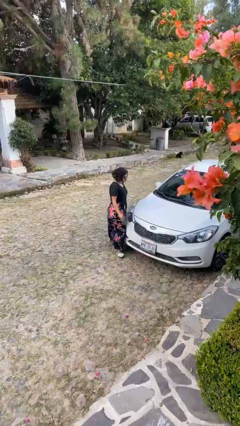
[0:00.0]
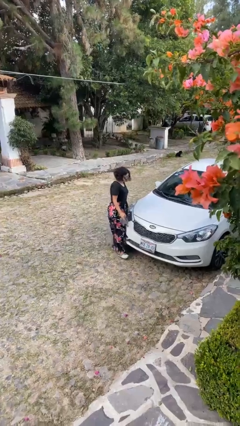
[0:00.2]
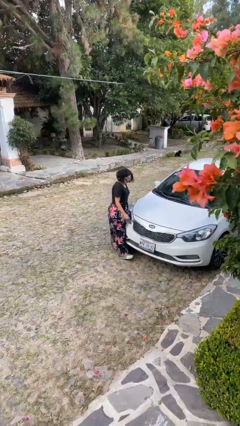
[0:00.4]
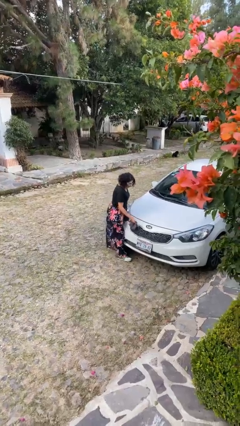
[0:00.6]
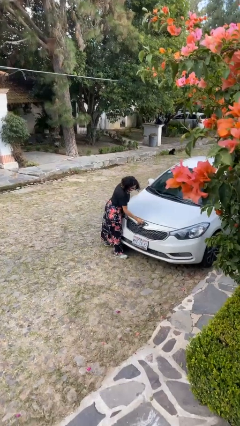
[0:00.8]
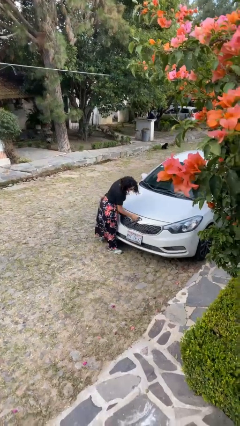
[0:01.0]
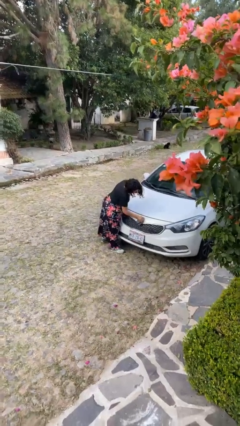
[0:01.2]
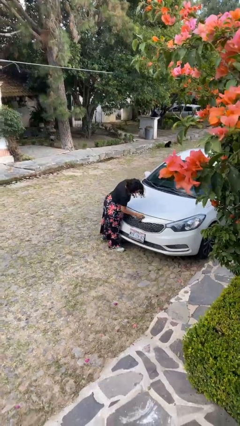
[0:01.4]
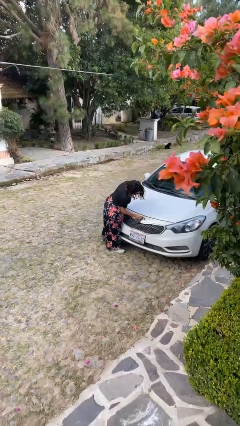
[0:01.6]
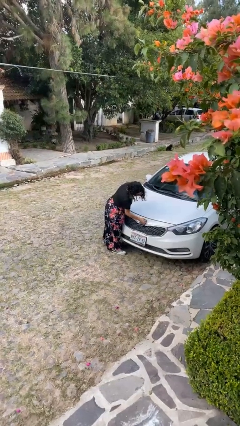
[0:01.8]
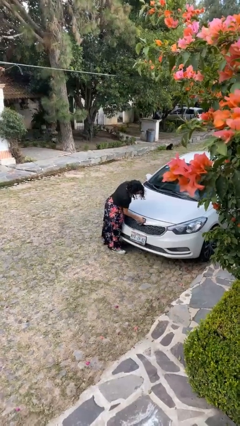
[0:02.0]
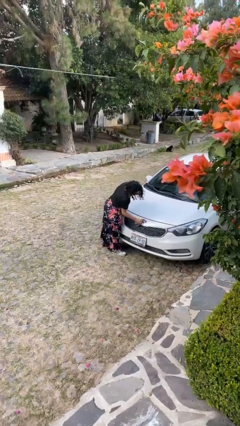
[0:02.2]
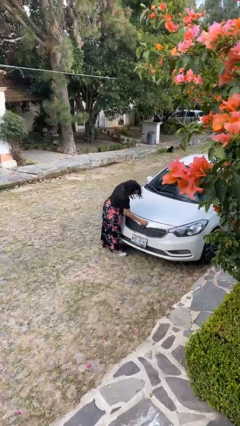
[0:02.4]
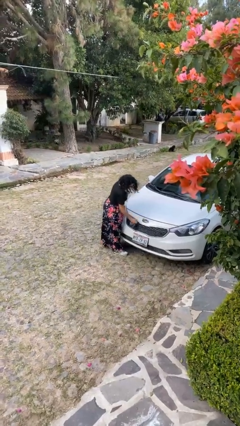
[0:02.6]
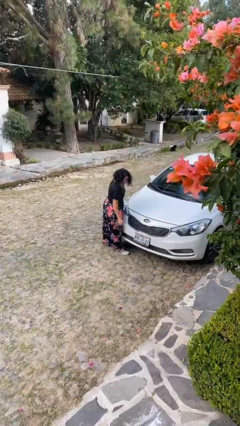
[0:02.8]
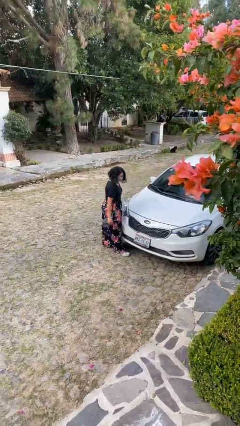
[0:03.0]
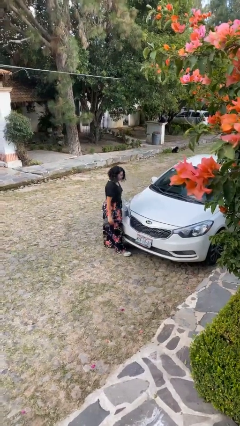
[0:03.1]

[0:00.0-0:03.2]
person polishes car with rag

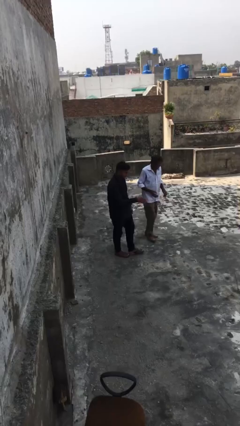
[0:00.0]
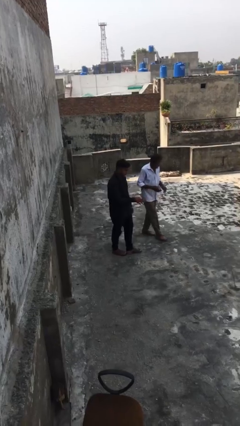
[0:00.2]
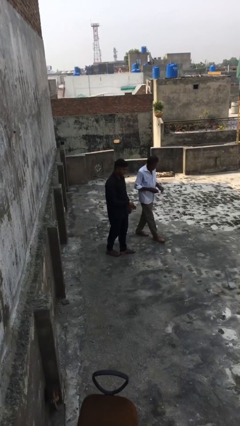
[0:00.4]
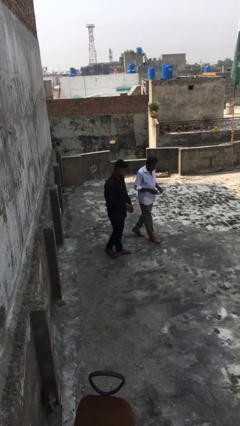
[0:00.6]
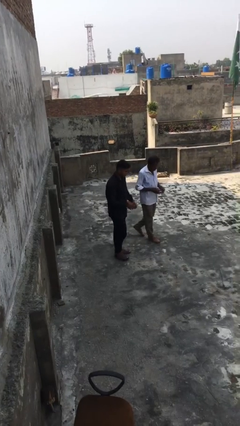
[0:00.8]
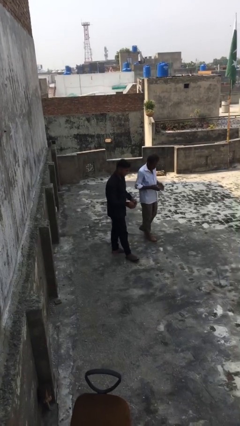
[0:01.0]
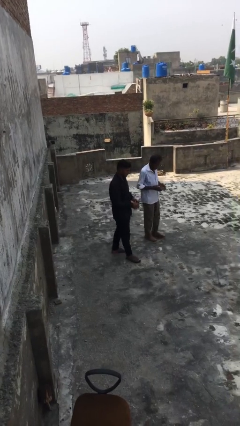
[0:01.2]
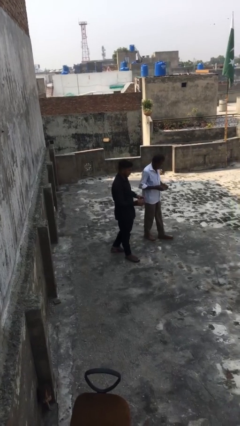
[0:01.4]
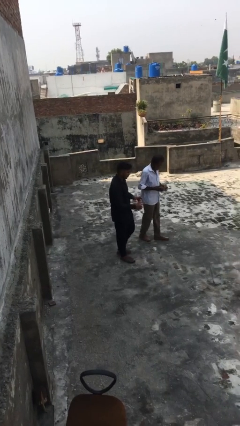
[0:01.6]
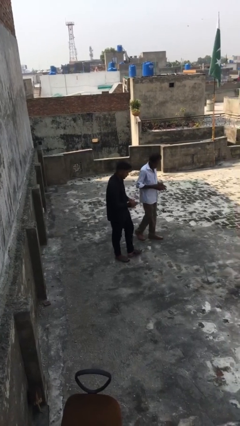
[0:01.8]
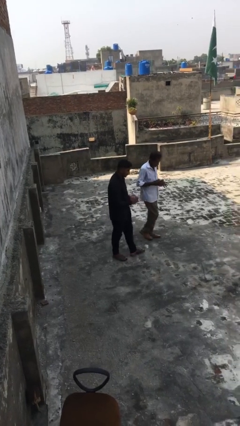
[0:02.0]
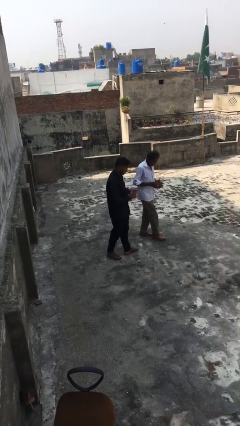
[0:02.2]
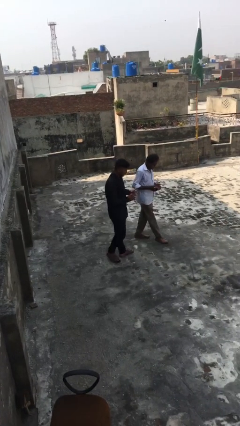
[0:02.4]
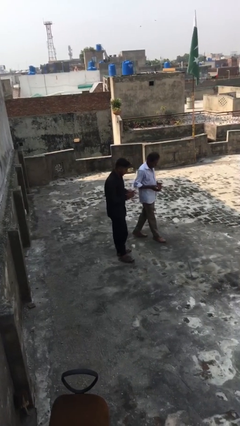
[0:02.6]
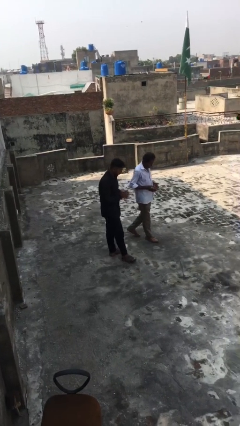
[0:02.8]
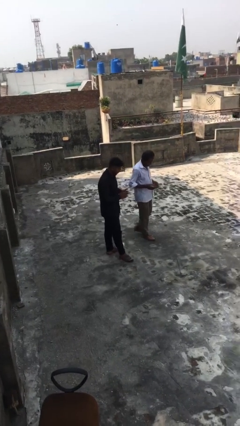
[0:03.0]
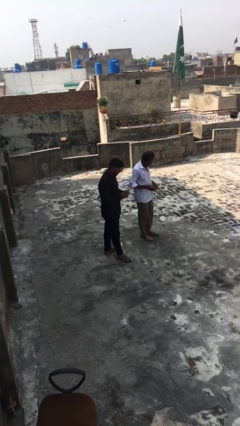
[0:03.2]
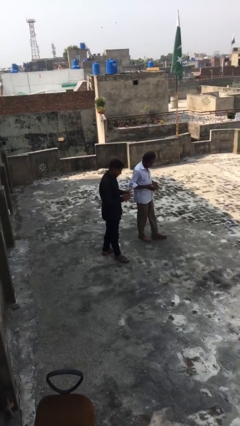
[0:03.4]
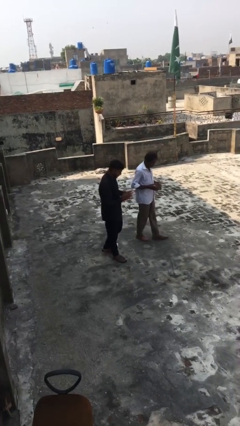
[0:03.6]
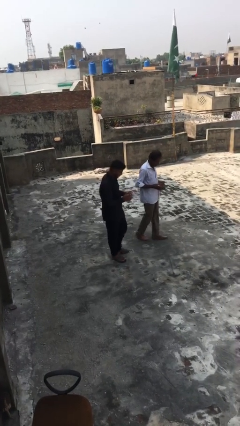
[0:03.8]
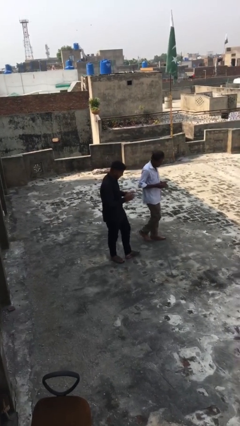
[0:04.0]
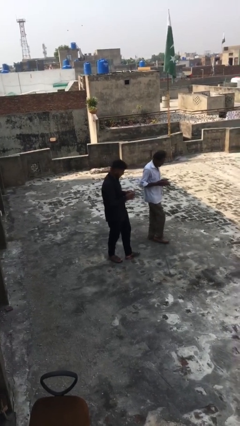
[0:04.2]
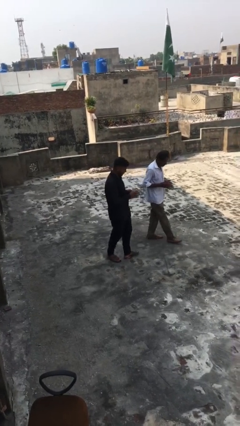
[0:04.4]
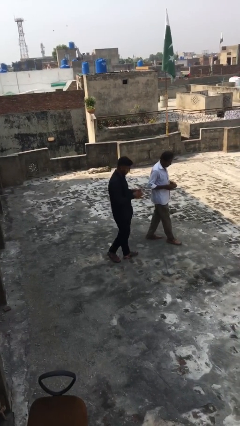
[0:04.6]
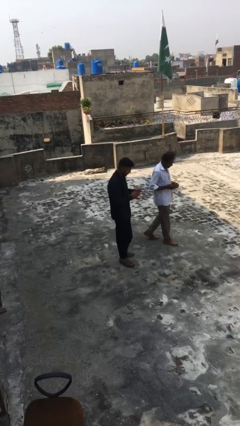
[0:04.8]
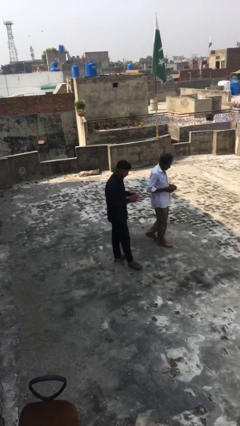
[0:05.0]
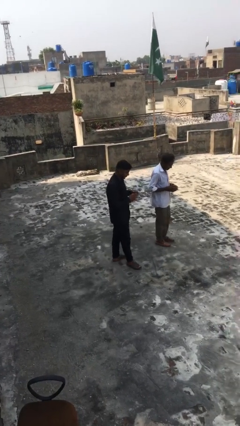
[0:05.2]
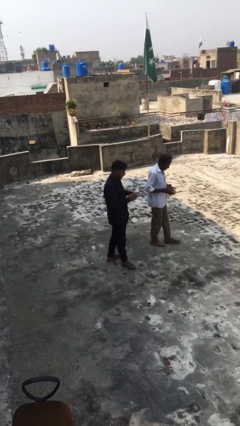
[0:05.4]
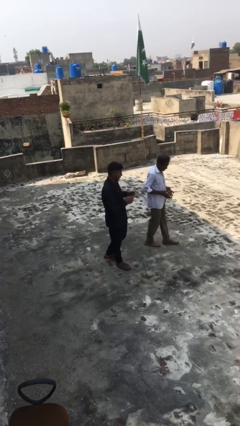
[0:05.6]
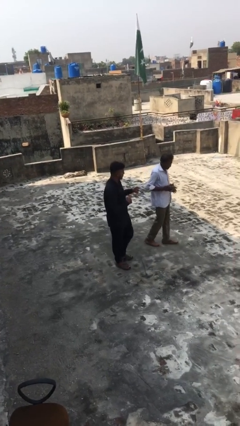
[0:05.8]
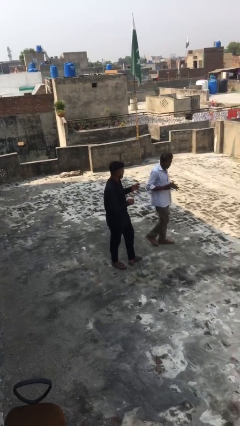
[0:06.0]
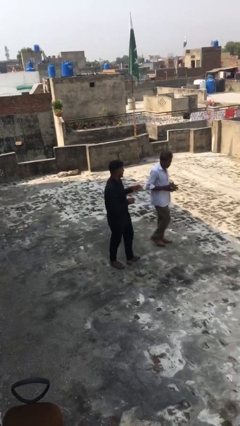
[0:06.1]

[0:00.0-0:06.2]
person talks to person

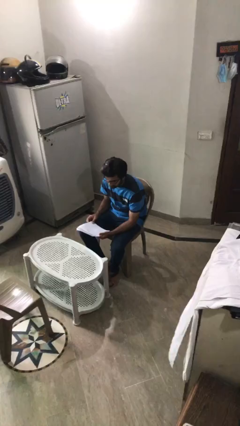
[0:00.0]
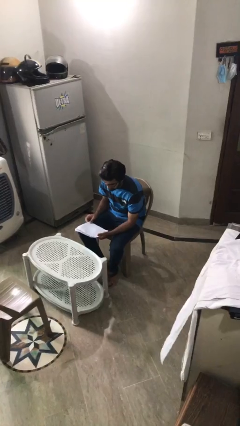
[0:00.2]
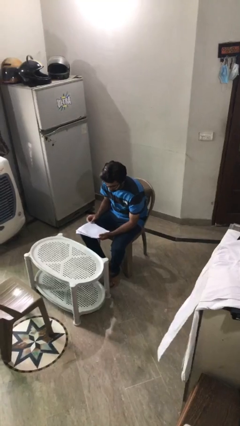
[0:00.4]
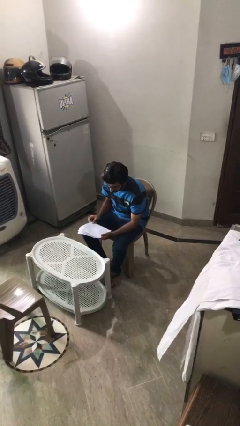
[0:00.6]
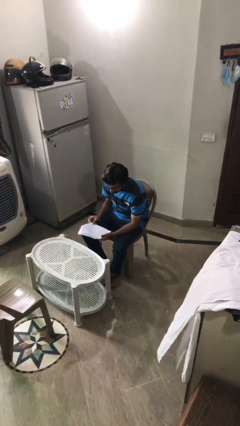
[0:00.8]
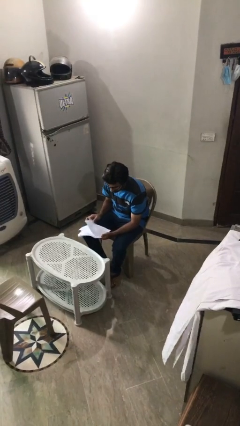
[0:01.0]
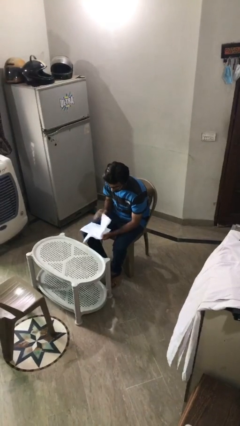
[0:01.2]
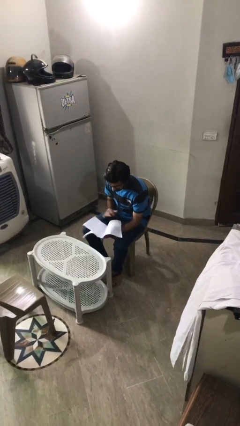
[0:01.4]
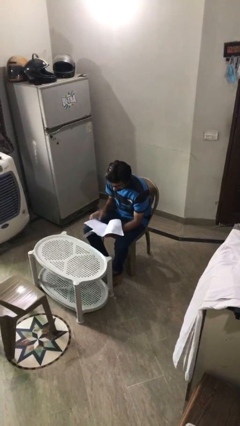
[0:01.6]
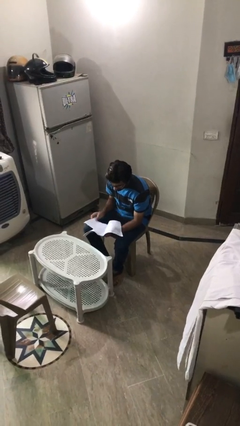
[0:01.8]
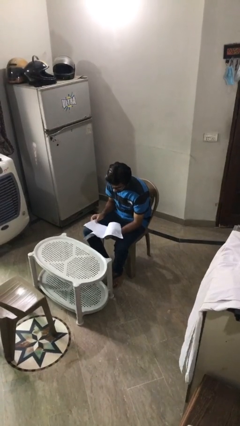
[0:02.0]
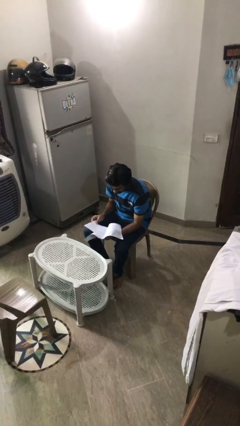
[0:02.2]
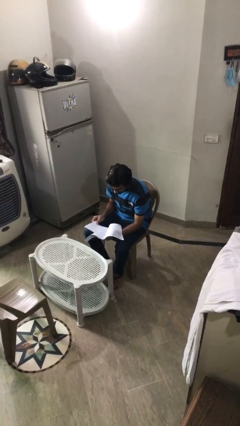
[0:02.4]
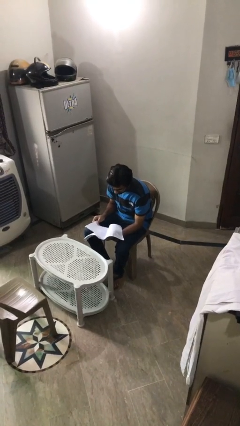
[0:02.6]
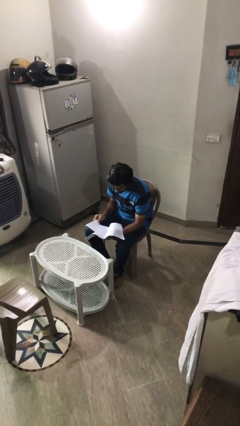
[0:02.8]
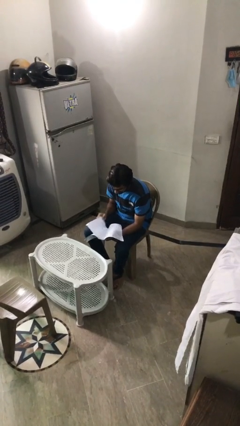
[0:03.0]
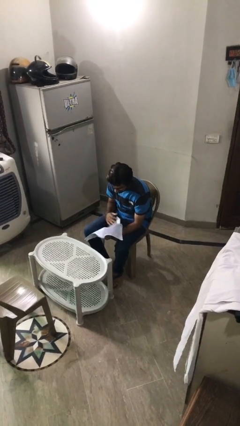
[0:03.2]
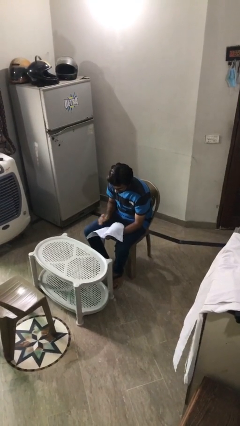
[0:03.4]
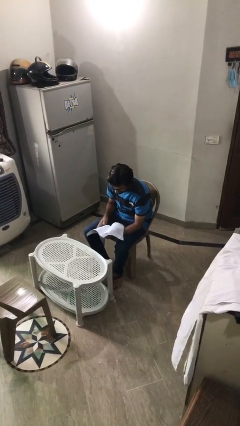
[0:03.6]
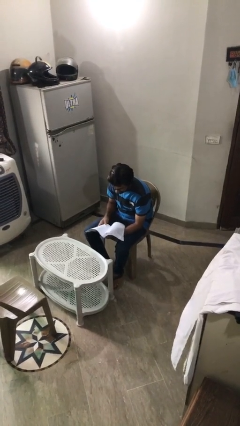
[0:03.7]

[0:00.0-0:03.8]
person reads document

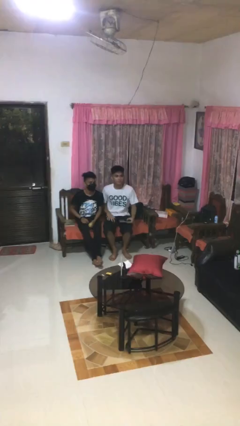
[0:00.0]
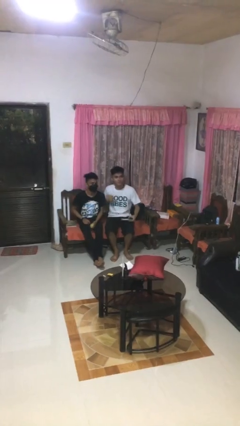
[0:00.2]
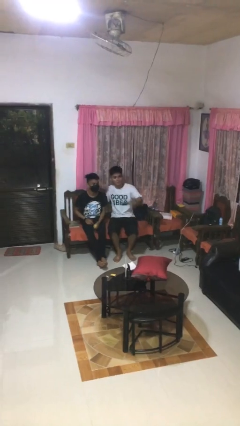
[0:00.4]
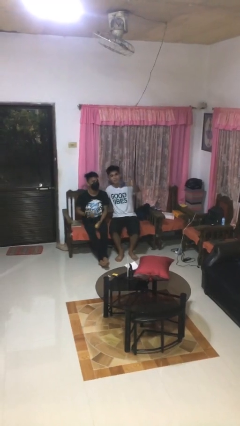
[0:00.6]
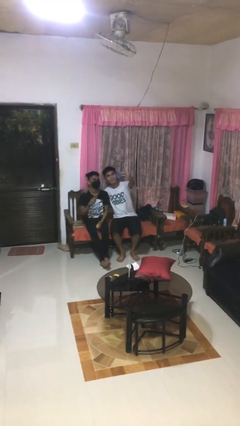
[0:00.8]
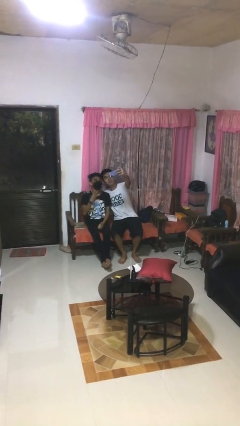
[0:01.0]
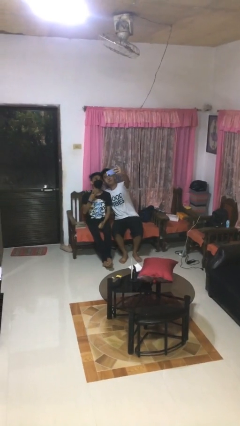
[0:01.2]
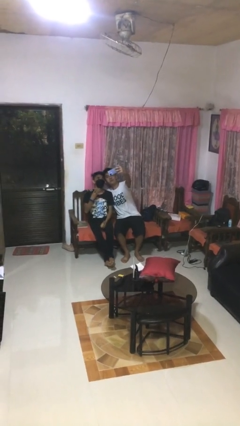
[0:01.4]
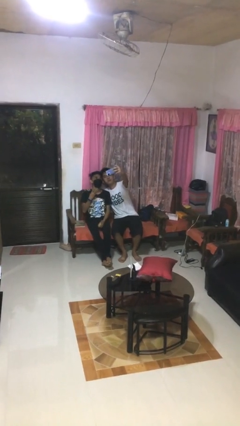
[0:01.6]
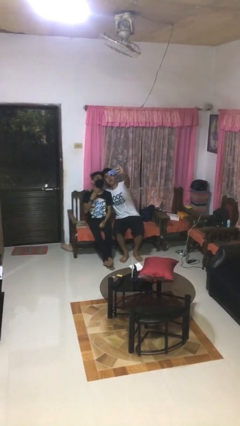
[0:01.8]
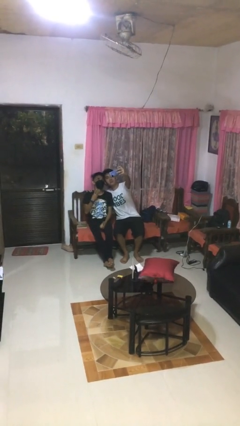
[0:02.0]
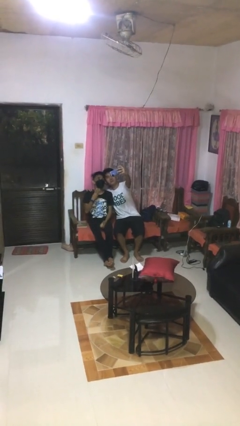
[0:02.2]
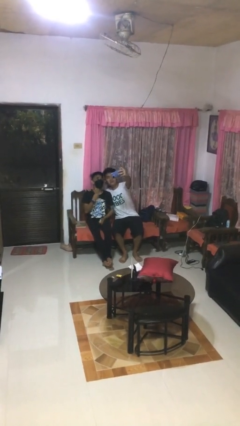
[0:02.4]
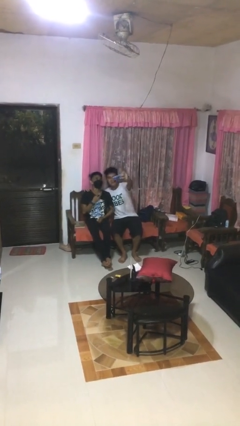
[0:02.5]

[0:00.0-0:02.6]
person takes selfie with person

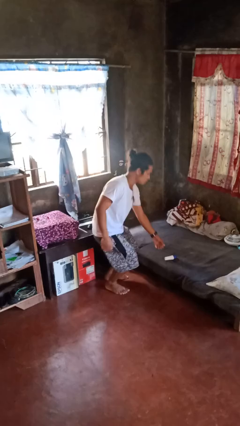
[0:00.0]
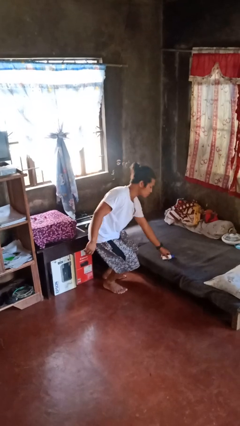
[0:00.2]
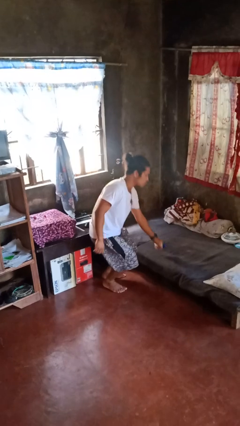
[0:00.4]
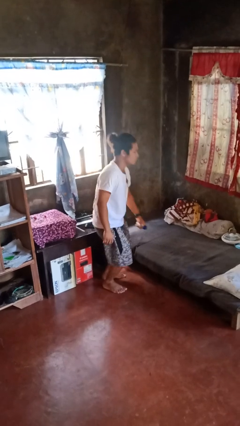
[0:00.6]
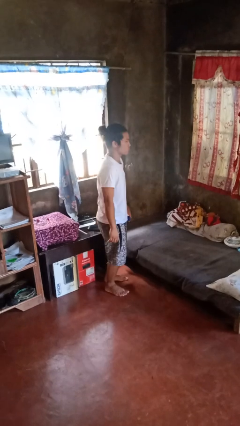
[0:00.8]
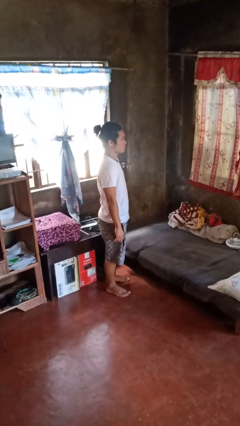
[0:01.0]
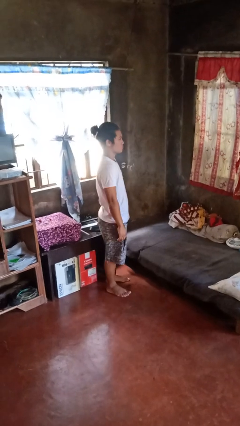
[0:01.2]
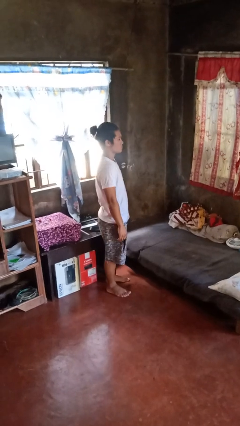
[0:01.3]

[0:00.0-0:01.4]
person picks up object from bed

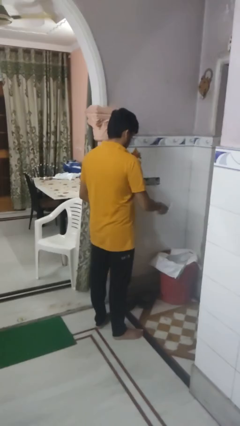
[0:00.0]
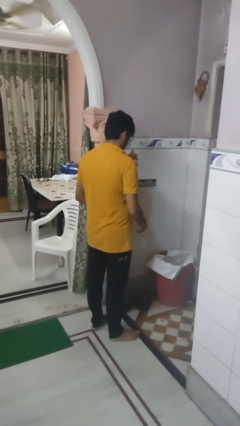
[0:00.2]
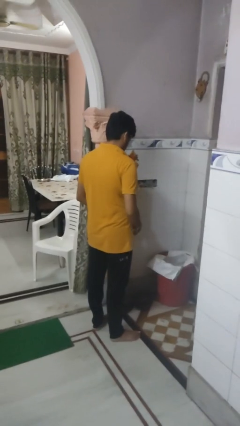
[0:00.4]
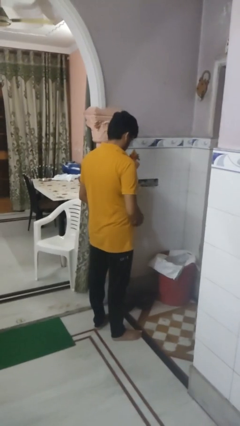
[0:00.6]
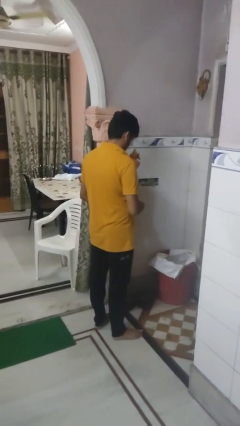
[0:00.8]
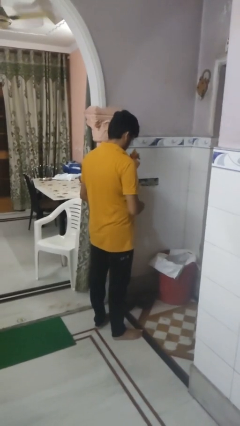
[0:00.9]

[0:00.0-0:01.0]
person discards trash
